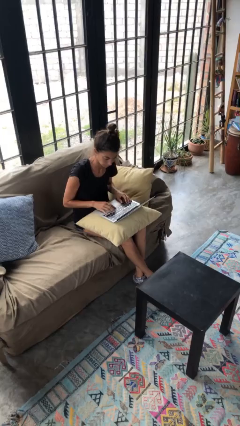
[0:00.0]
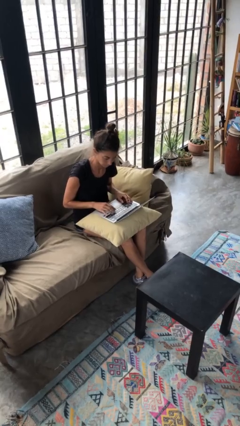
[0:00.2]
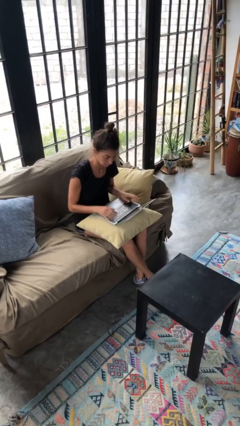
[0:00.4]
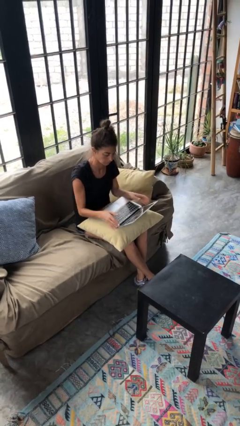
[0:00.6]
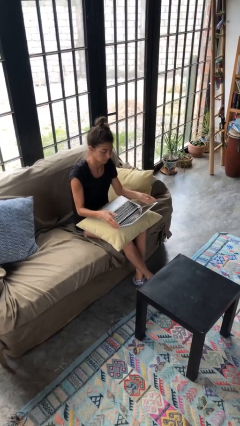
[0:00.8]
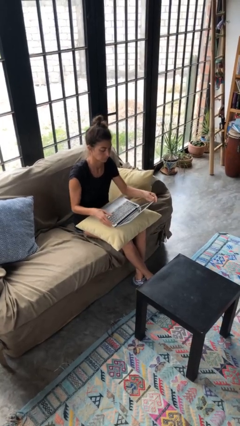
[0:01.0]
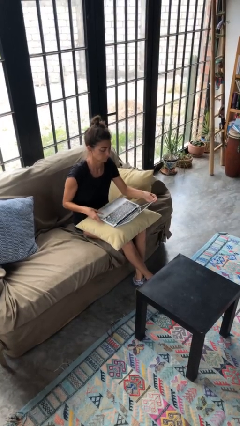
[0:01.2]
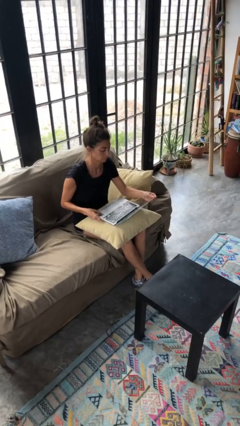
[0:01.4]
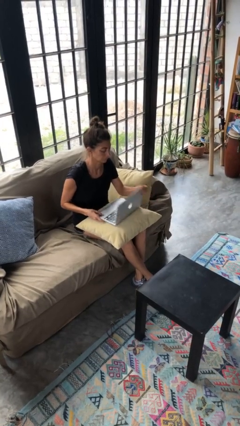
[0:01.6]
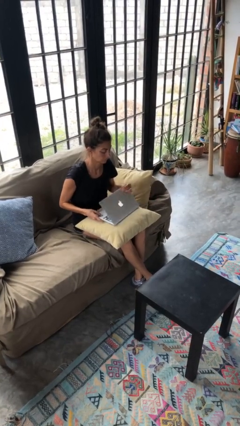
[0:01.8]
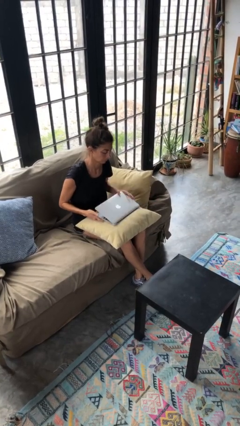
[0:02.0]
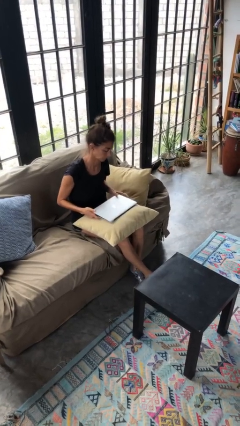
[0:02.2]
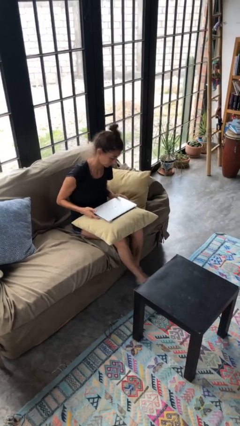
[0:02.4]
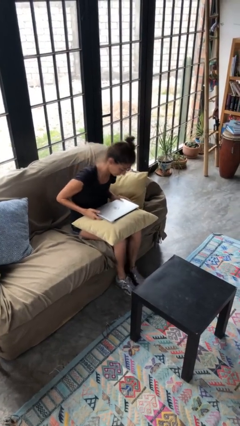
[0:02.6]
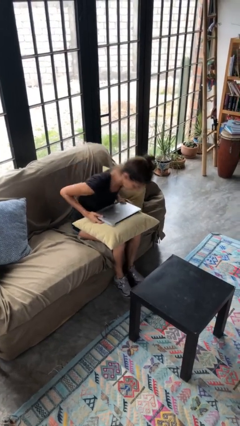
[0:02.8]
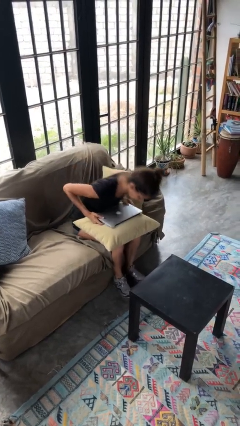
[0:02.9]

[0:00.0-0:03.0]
person closes laptop

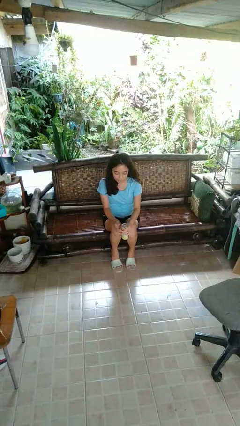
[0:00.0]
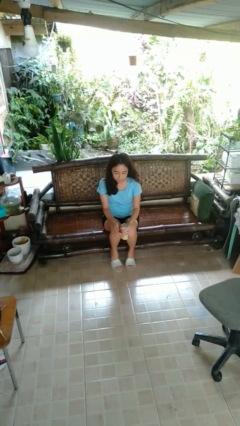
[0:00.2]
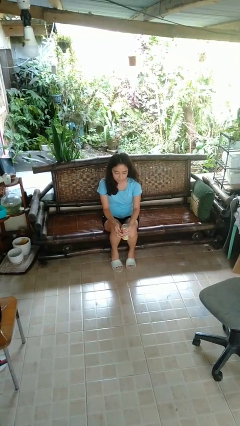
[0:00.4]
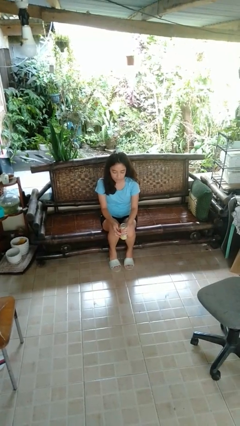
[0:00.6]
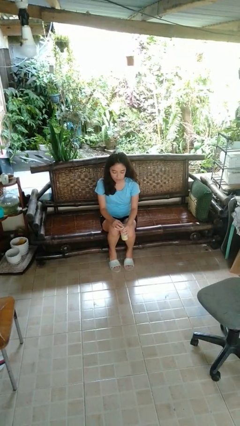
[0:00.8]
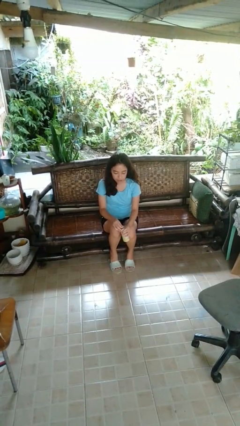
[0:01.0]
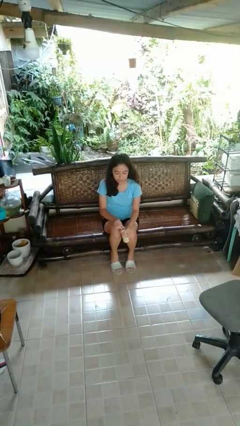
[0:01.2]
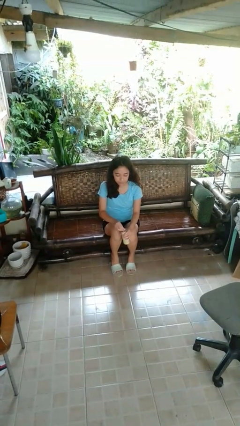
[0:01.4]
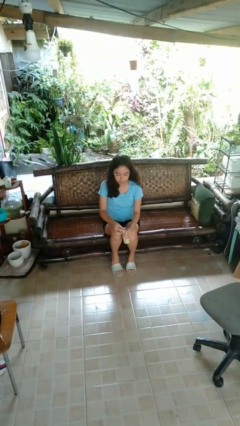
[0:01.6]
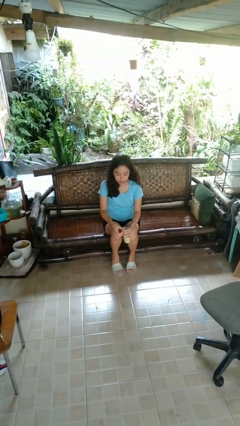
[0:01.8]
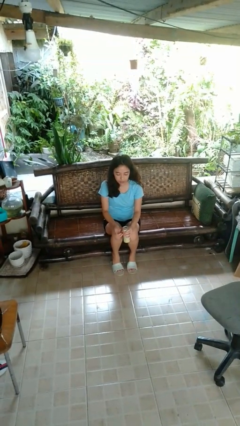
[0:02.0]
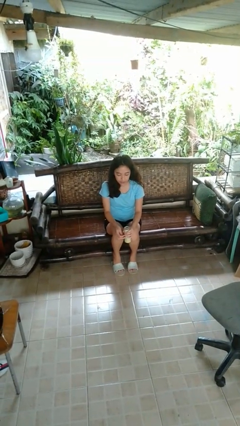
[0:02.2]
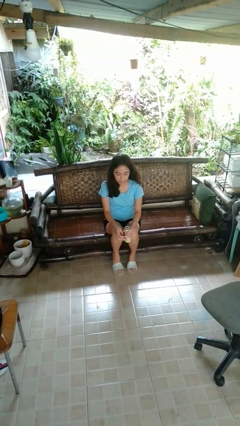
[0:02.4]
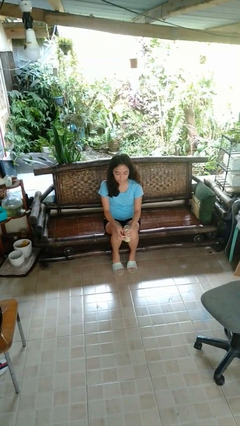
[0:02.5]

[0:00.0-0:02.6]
person opens beverage can

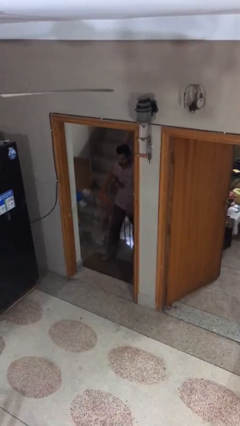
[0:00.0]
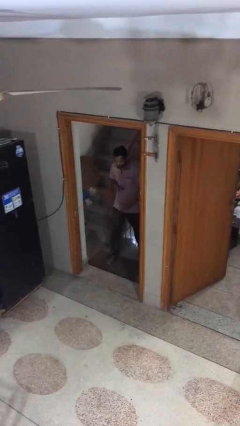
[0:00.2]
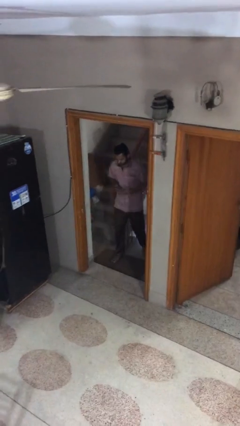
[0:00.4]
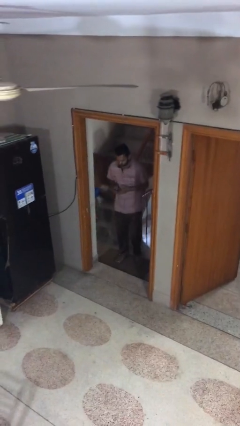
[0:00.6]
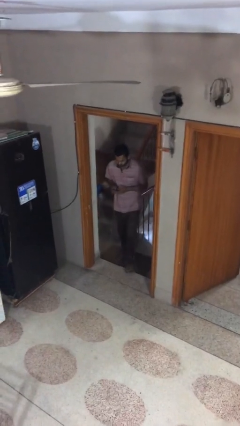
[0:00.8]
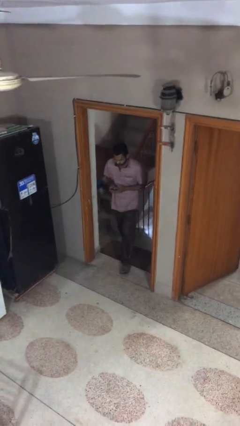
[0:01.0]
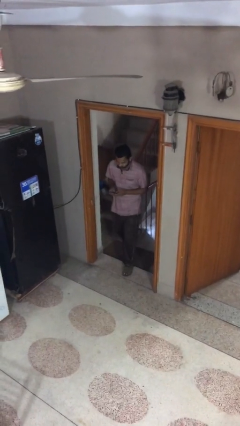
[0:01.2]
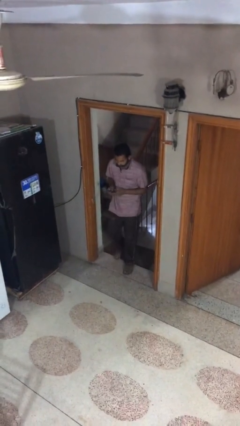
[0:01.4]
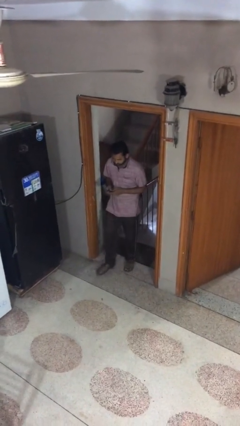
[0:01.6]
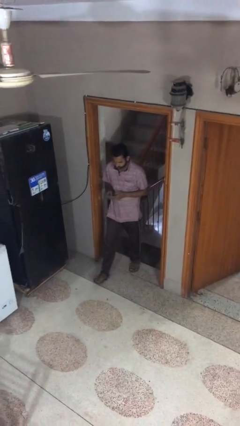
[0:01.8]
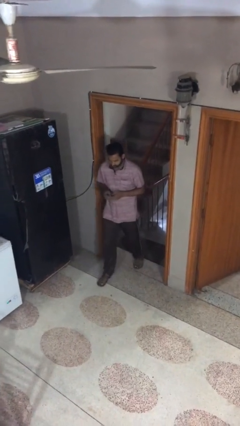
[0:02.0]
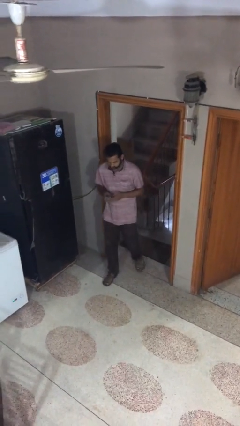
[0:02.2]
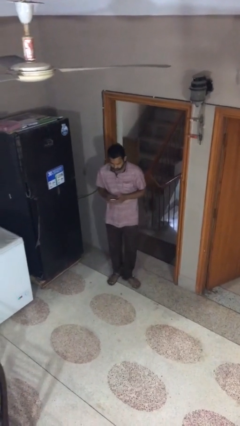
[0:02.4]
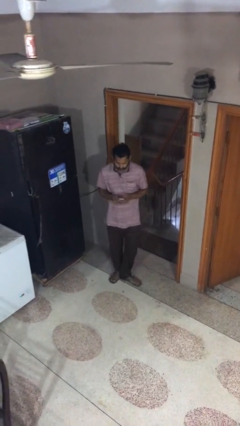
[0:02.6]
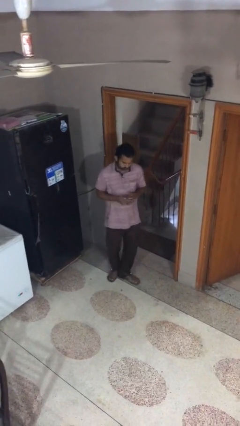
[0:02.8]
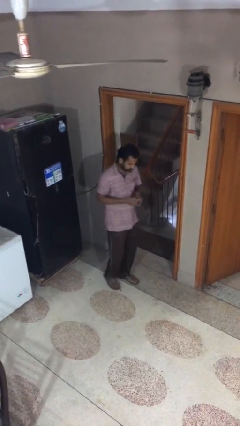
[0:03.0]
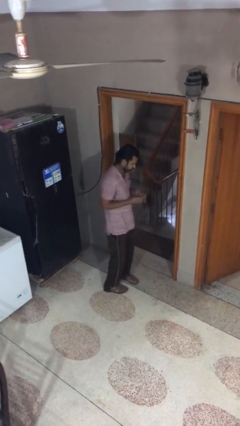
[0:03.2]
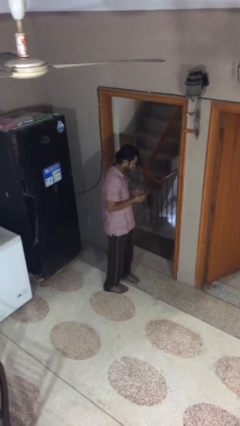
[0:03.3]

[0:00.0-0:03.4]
person enters scene through structure

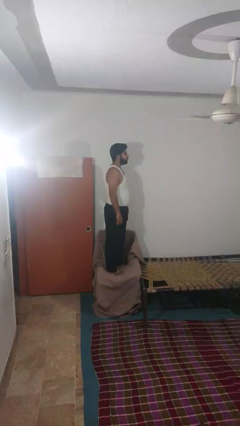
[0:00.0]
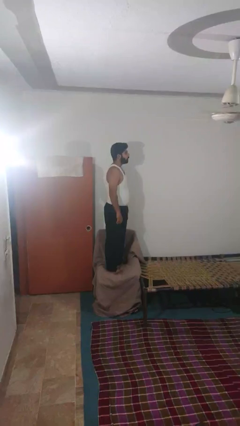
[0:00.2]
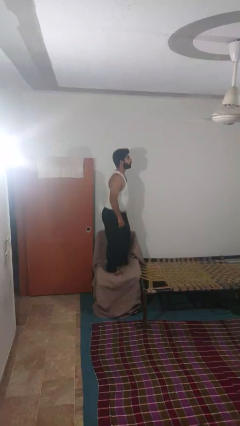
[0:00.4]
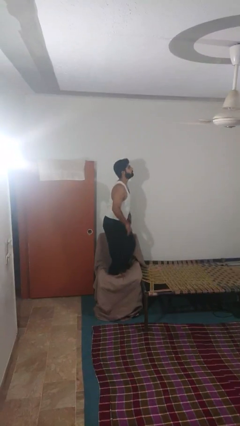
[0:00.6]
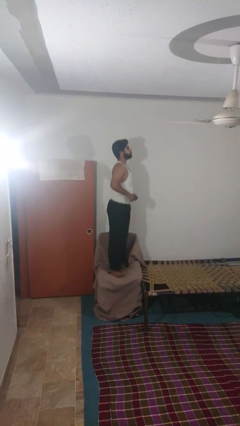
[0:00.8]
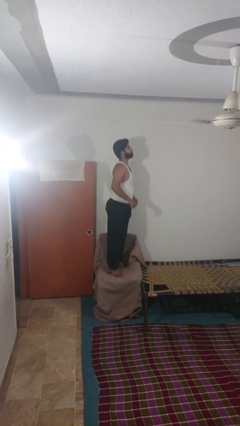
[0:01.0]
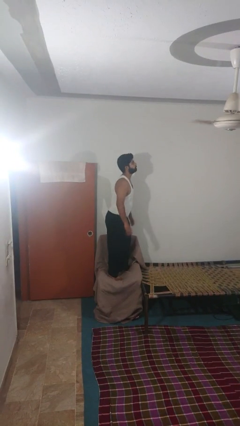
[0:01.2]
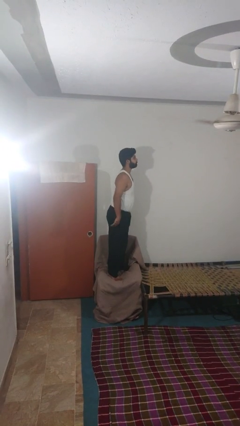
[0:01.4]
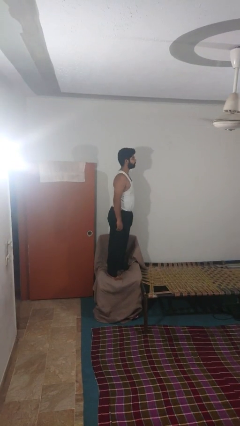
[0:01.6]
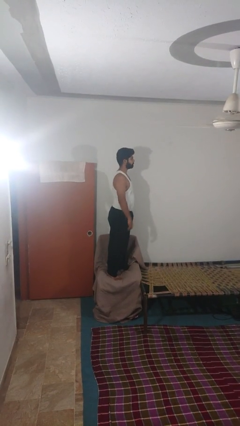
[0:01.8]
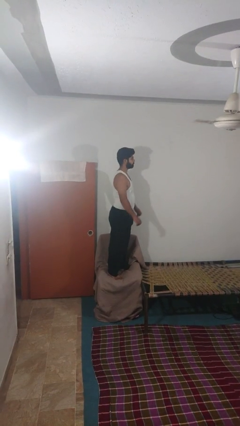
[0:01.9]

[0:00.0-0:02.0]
person jumps on couch

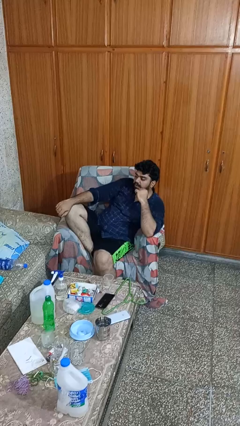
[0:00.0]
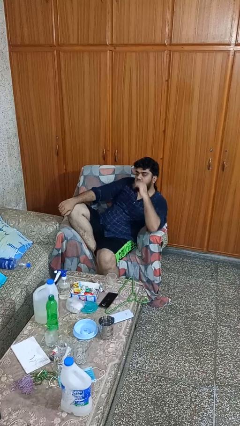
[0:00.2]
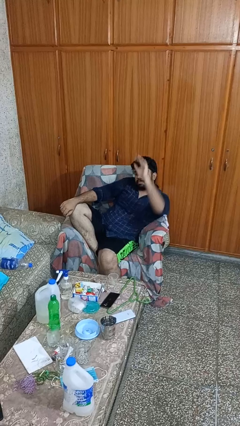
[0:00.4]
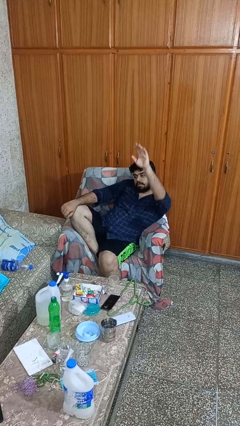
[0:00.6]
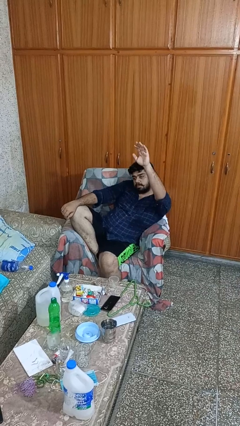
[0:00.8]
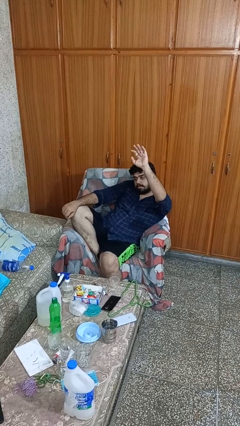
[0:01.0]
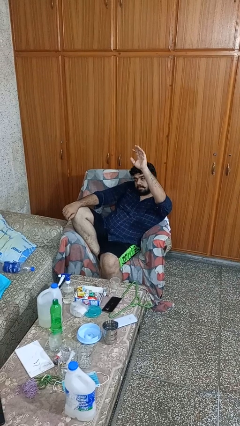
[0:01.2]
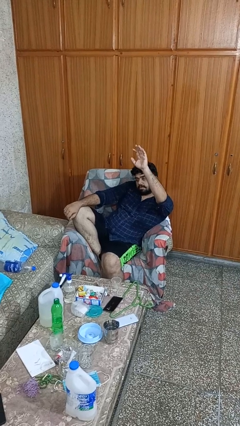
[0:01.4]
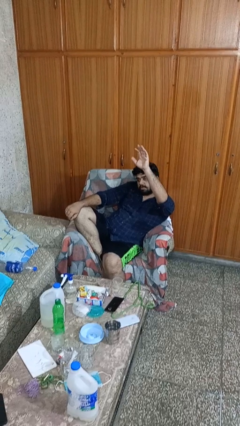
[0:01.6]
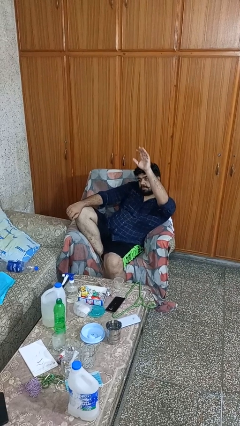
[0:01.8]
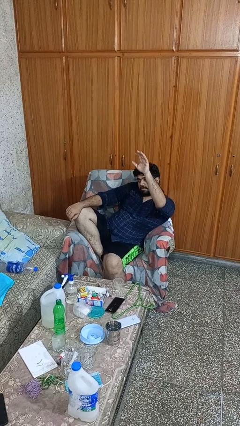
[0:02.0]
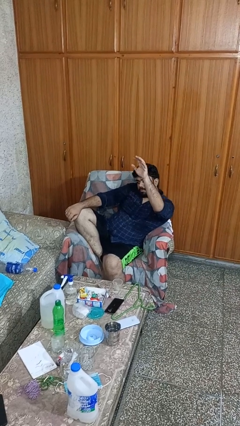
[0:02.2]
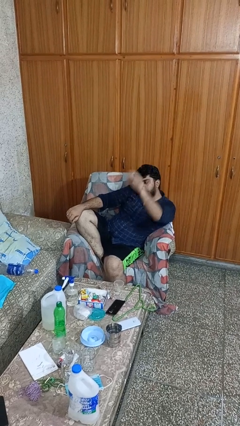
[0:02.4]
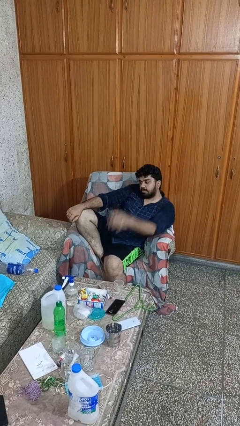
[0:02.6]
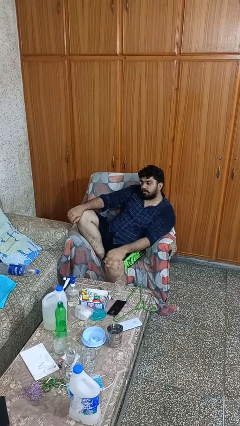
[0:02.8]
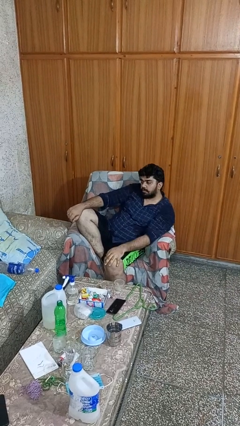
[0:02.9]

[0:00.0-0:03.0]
person waves at person

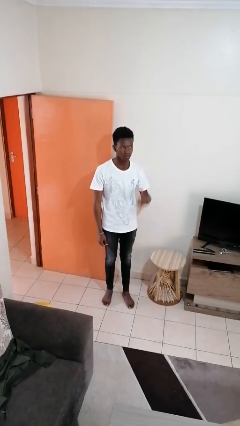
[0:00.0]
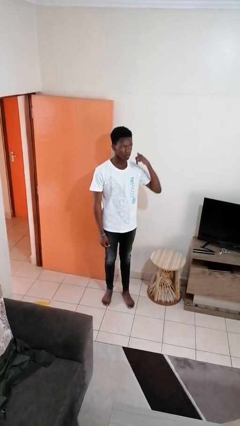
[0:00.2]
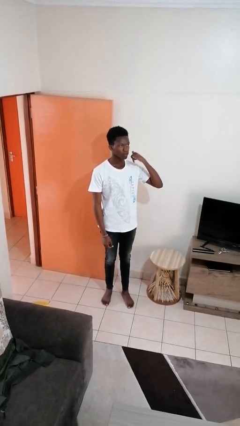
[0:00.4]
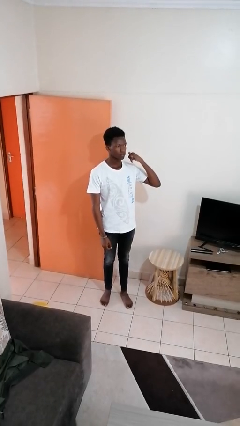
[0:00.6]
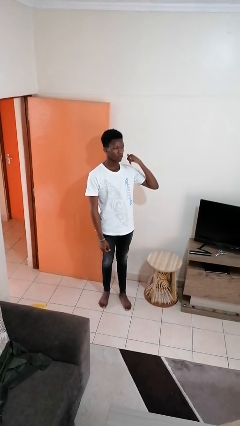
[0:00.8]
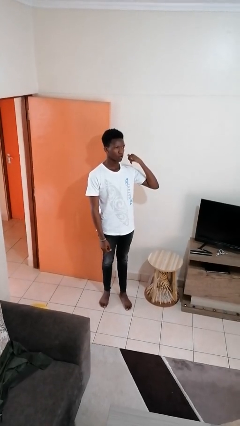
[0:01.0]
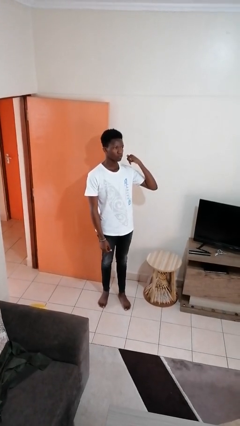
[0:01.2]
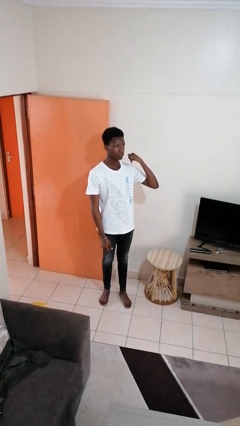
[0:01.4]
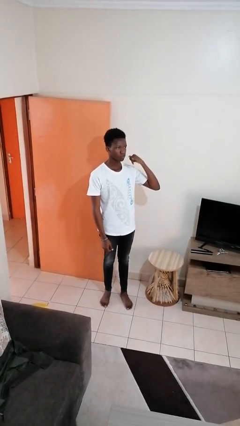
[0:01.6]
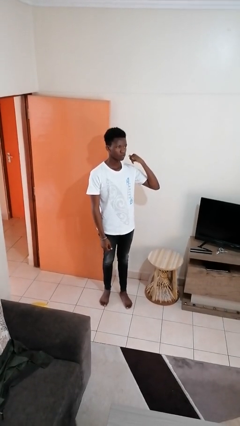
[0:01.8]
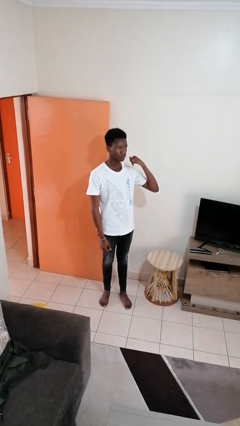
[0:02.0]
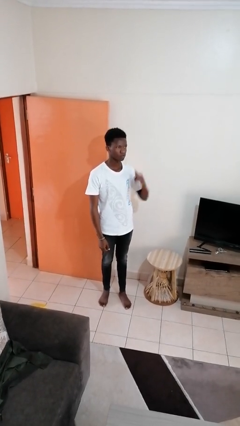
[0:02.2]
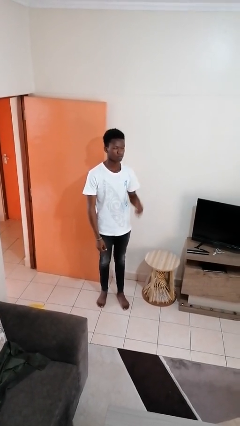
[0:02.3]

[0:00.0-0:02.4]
person gestures call me

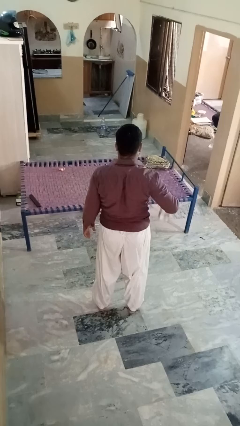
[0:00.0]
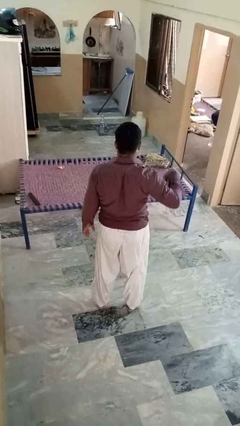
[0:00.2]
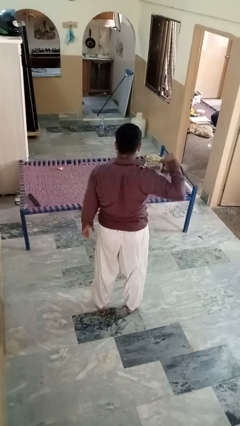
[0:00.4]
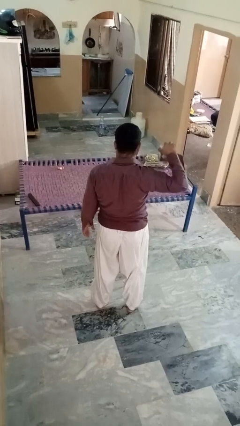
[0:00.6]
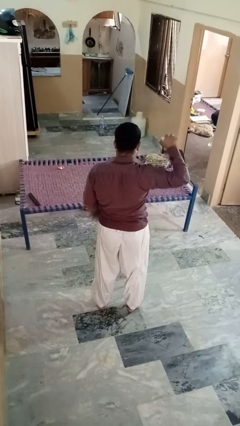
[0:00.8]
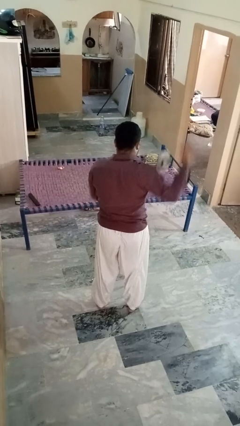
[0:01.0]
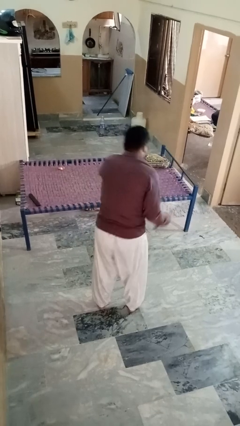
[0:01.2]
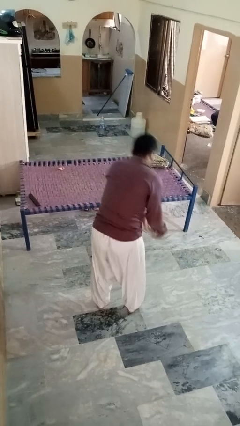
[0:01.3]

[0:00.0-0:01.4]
person drops object
